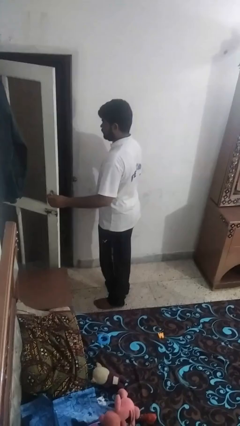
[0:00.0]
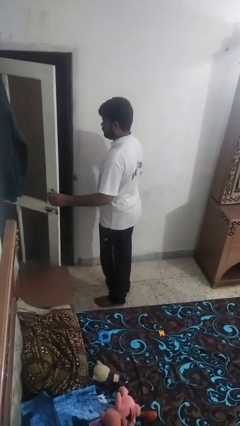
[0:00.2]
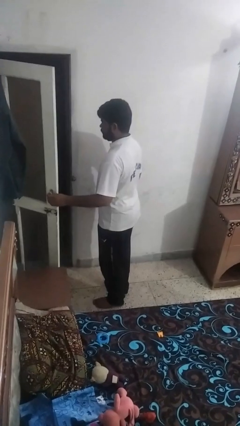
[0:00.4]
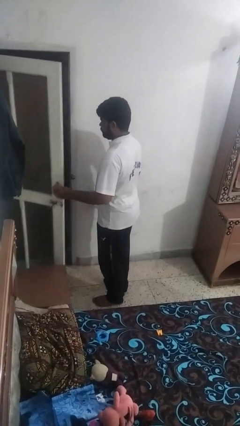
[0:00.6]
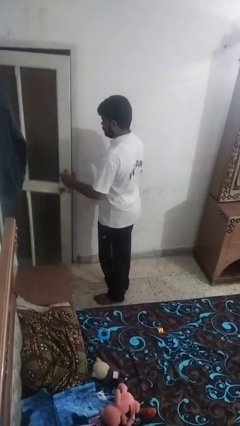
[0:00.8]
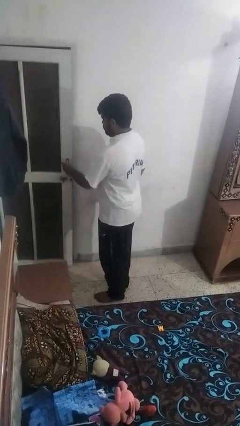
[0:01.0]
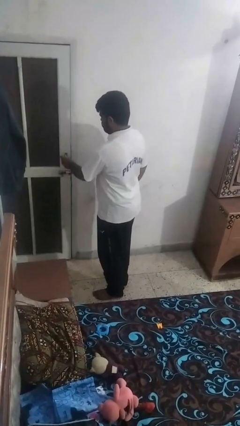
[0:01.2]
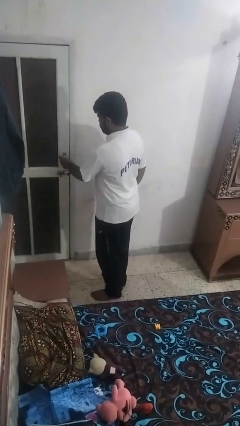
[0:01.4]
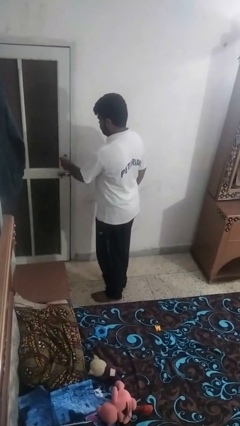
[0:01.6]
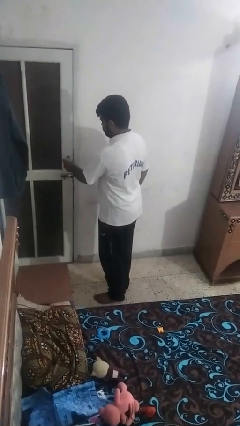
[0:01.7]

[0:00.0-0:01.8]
person closes facility door

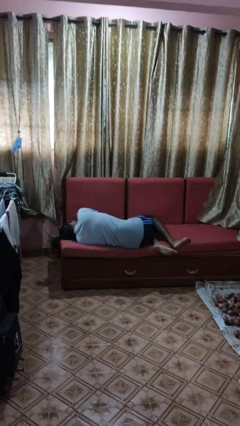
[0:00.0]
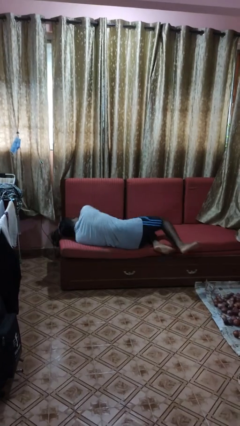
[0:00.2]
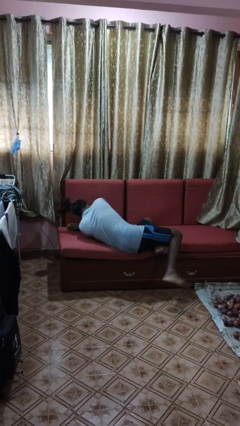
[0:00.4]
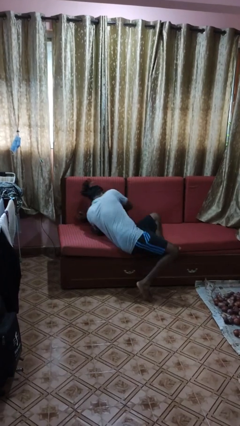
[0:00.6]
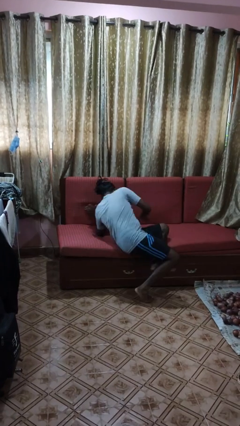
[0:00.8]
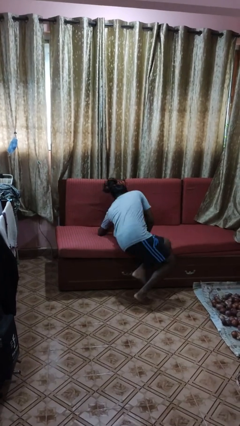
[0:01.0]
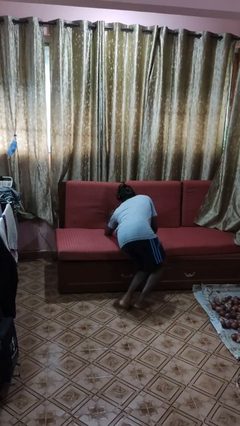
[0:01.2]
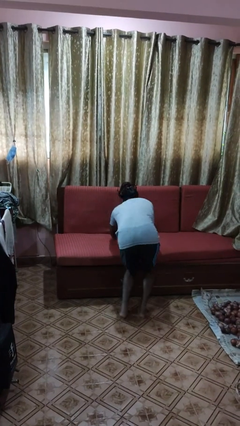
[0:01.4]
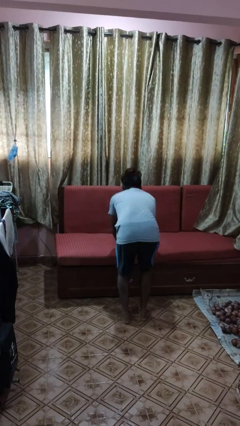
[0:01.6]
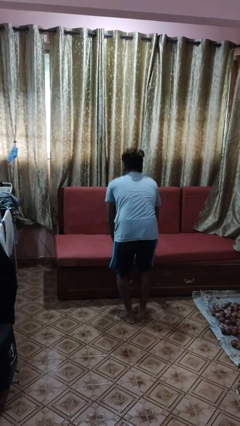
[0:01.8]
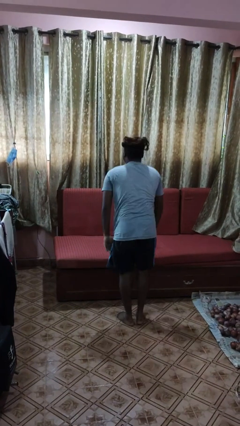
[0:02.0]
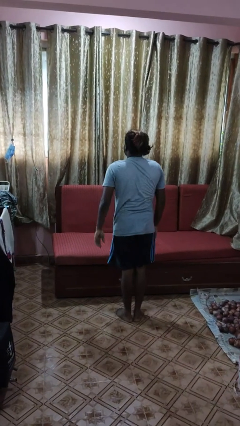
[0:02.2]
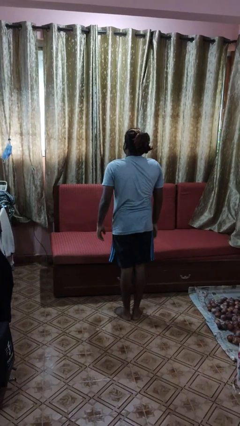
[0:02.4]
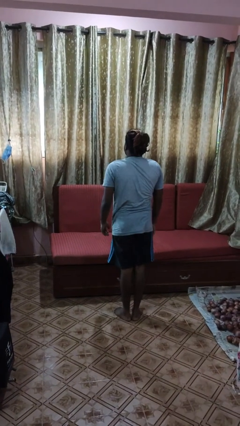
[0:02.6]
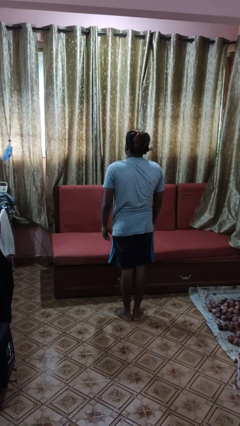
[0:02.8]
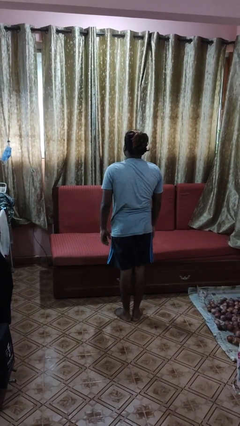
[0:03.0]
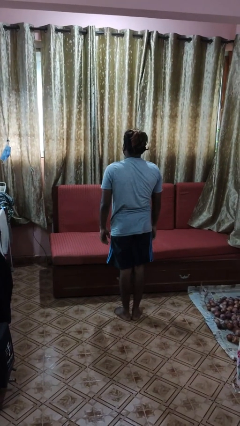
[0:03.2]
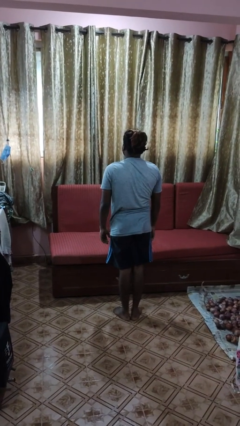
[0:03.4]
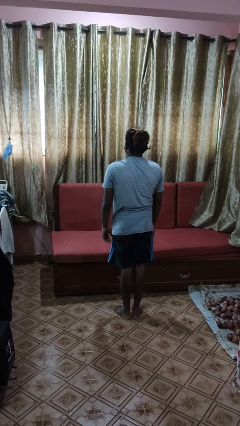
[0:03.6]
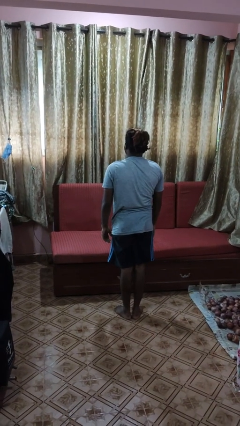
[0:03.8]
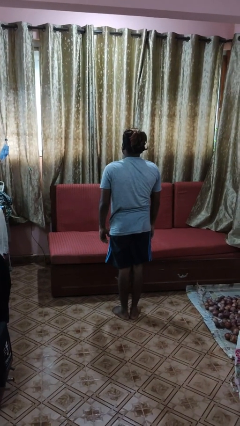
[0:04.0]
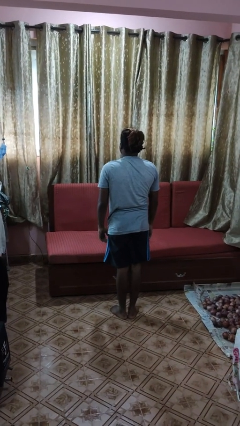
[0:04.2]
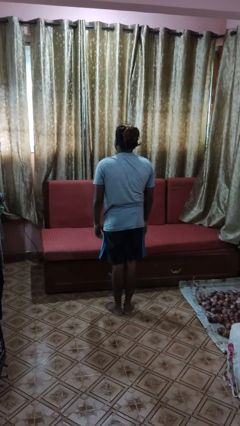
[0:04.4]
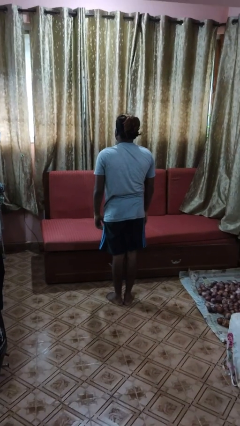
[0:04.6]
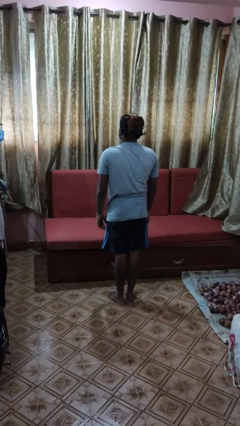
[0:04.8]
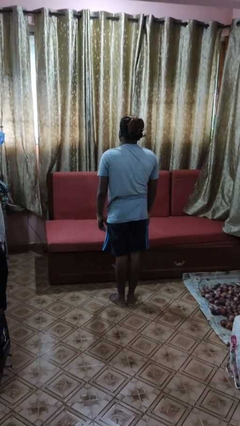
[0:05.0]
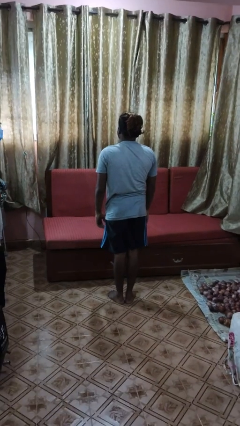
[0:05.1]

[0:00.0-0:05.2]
person stands up

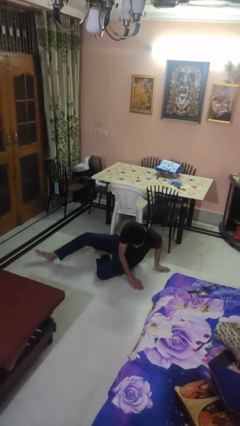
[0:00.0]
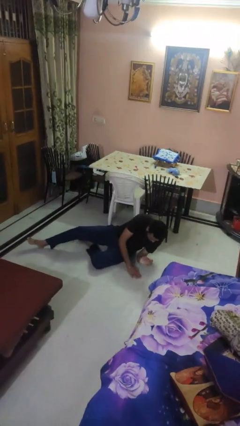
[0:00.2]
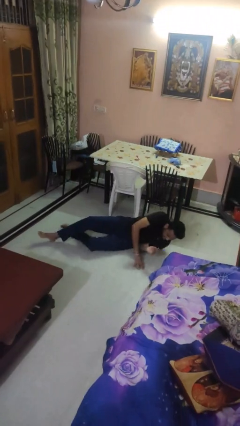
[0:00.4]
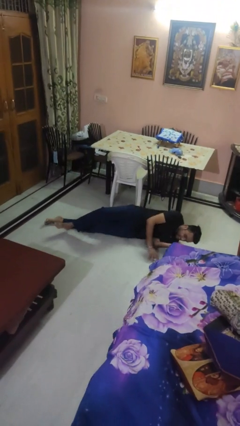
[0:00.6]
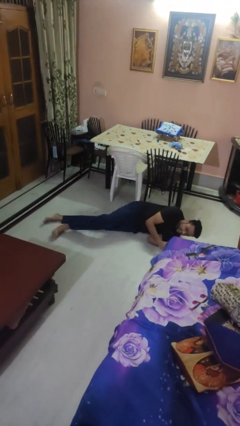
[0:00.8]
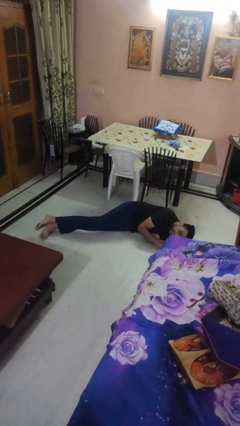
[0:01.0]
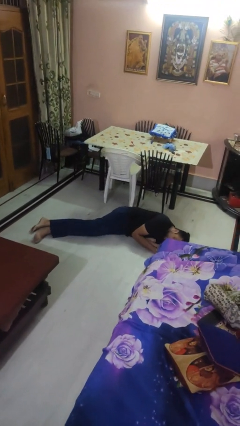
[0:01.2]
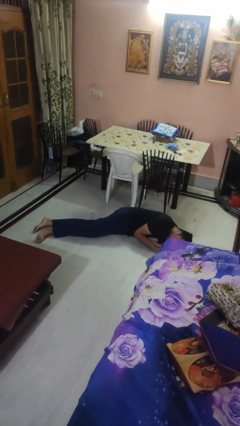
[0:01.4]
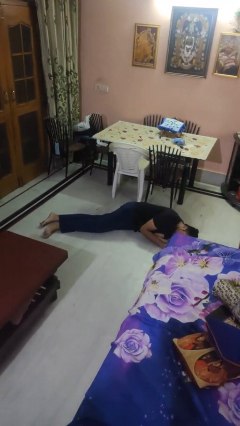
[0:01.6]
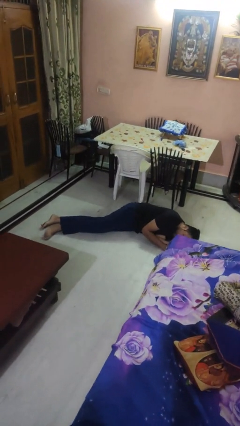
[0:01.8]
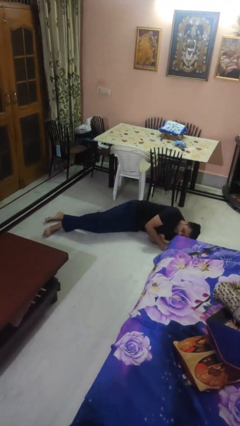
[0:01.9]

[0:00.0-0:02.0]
person lies down on floor

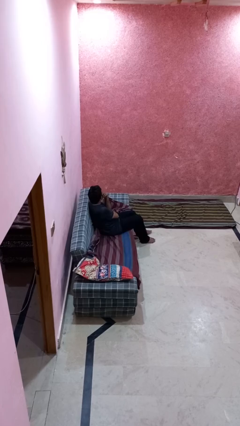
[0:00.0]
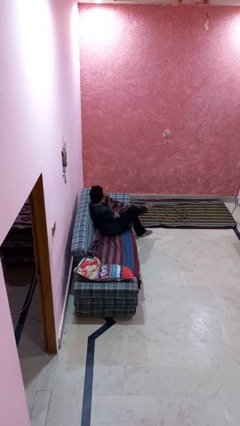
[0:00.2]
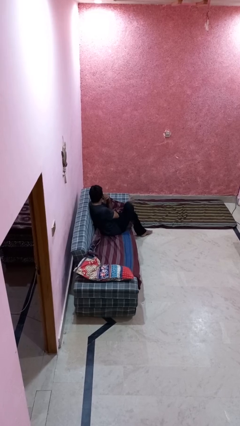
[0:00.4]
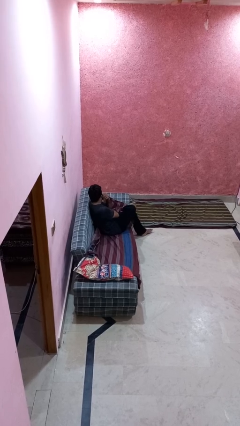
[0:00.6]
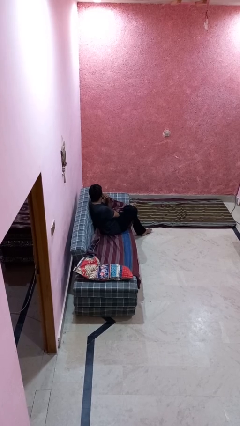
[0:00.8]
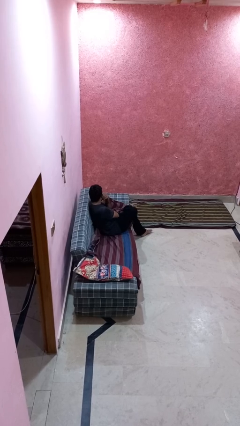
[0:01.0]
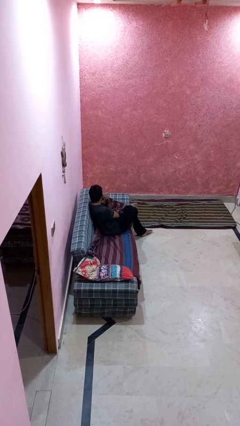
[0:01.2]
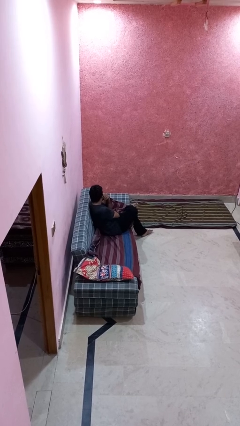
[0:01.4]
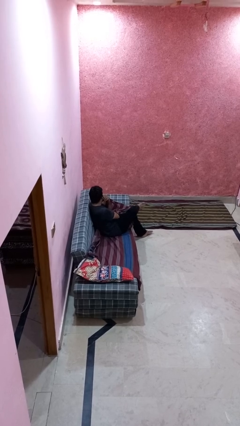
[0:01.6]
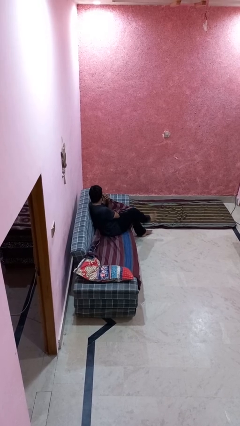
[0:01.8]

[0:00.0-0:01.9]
person crosses legs

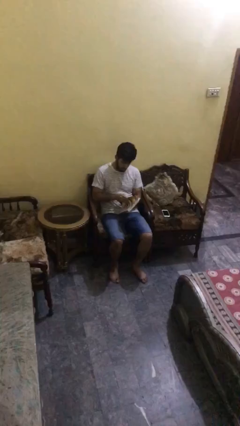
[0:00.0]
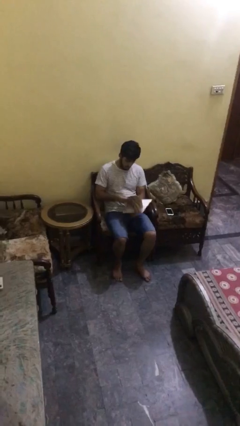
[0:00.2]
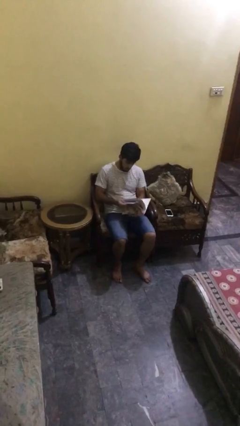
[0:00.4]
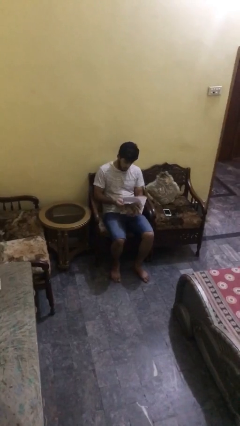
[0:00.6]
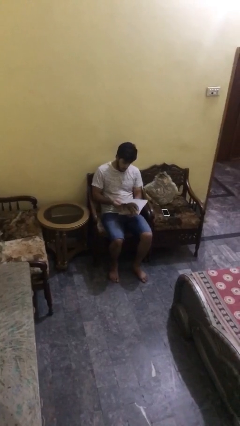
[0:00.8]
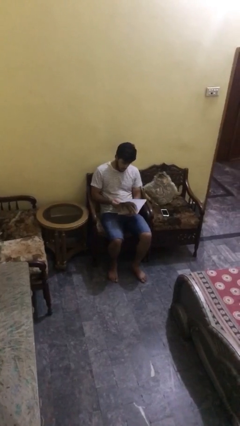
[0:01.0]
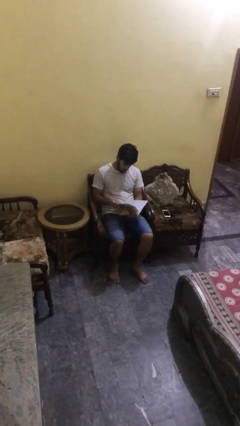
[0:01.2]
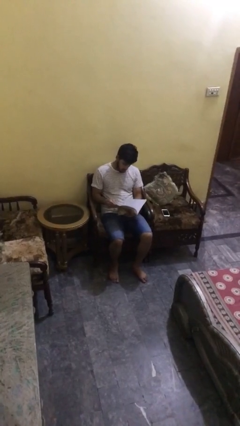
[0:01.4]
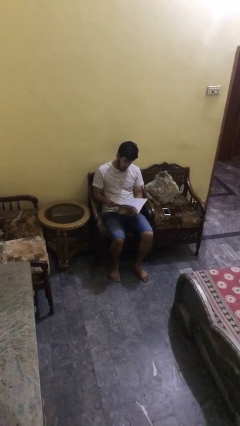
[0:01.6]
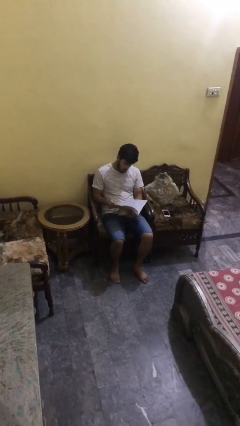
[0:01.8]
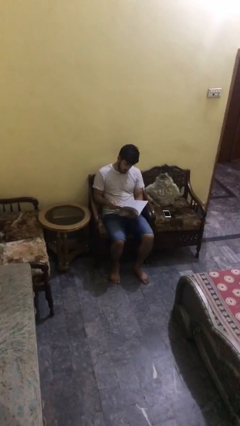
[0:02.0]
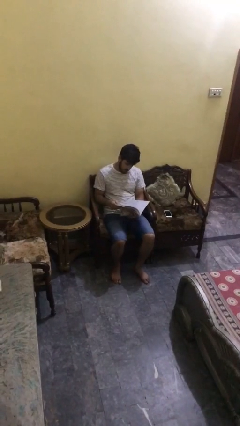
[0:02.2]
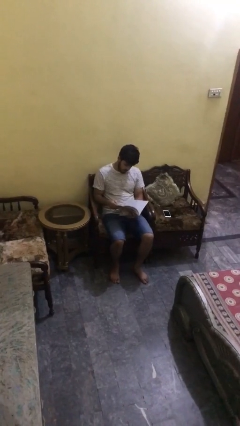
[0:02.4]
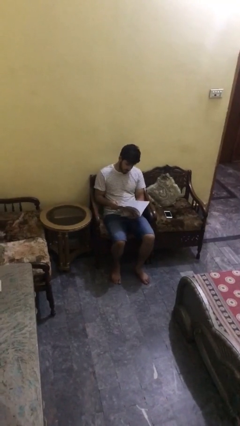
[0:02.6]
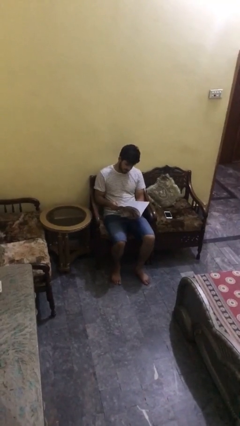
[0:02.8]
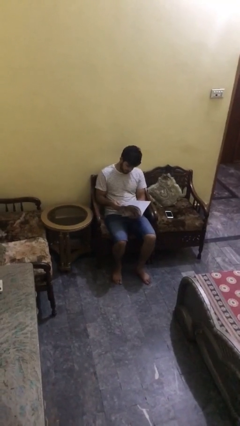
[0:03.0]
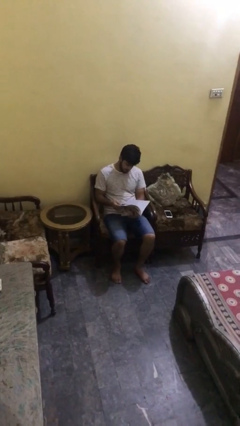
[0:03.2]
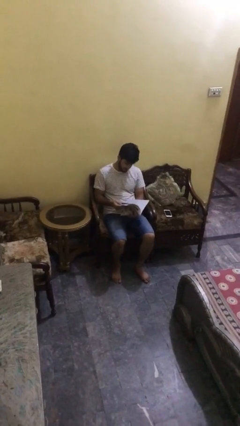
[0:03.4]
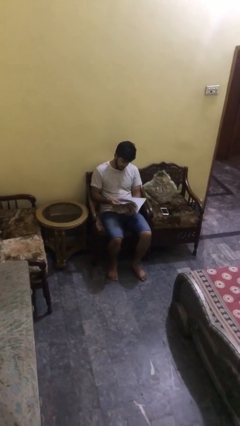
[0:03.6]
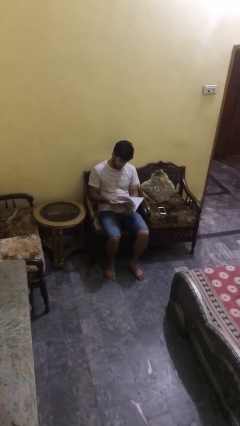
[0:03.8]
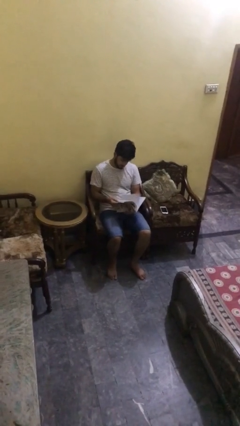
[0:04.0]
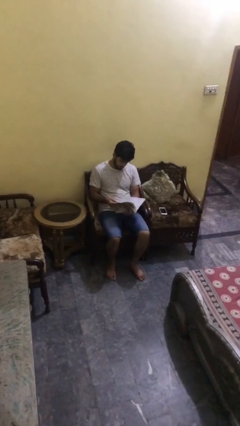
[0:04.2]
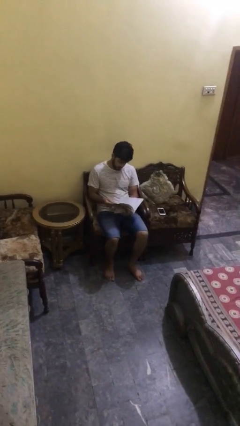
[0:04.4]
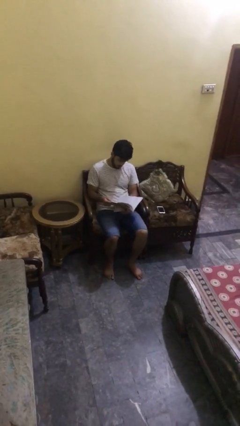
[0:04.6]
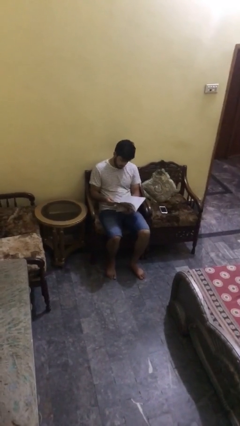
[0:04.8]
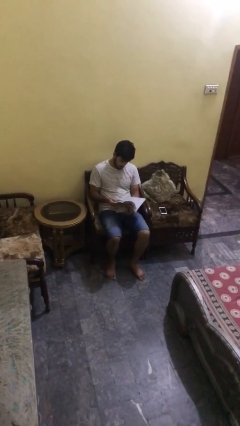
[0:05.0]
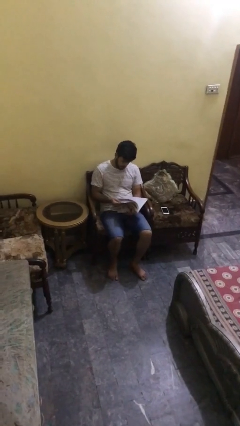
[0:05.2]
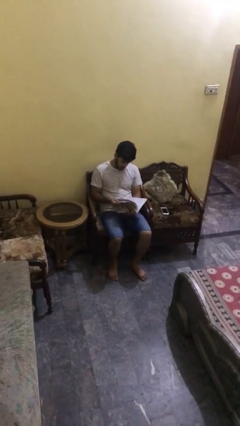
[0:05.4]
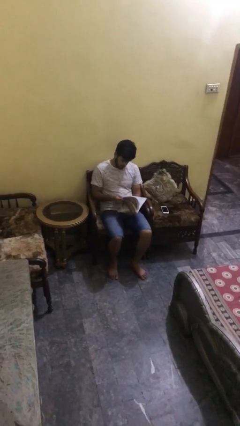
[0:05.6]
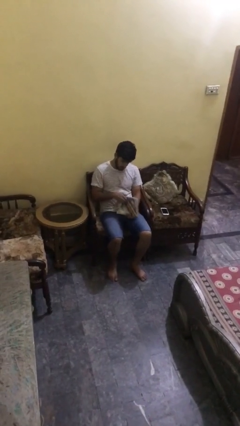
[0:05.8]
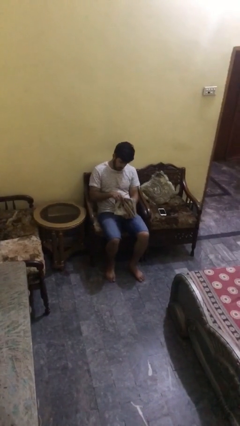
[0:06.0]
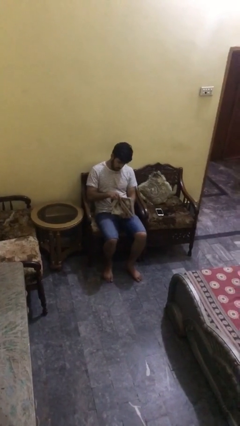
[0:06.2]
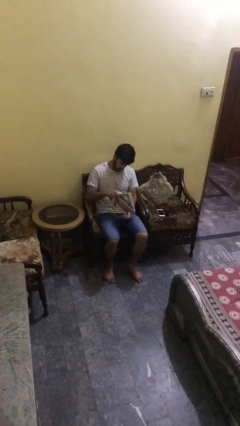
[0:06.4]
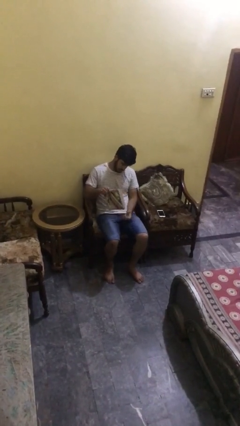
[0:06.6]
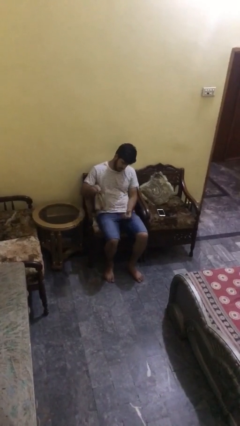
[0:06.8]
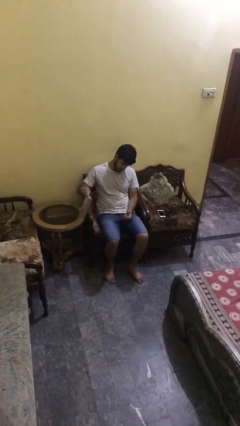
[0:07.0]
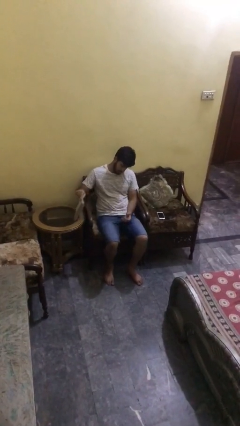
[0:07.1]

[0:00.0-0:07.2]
person reads document
